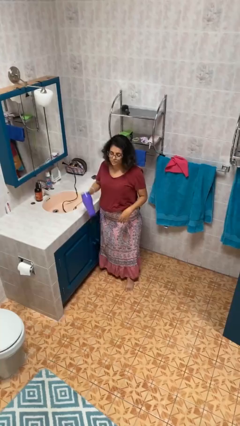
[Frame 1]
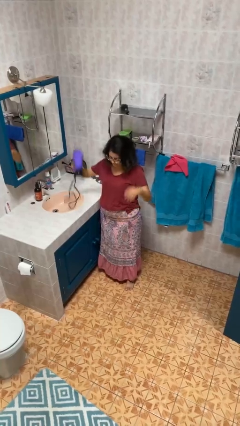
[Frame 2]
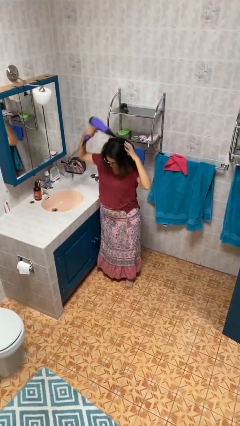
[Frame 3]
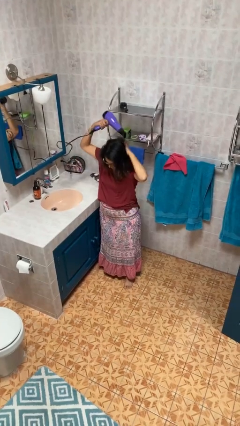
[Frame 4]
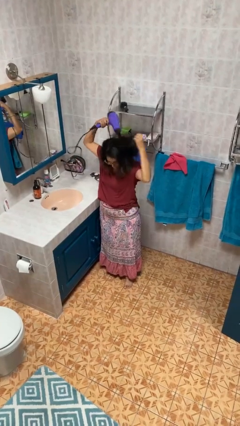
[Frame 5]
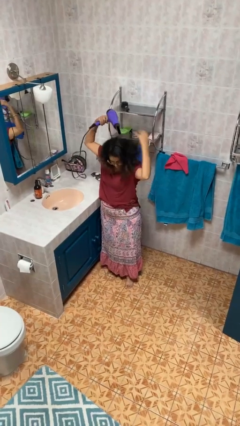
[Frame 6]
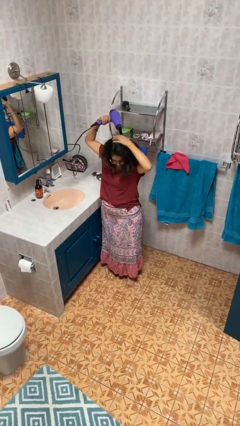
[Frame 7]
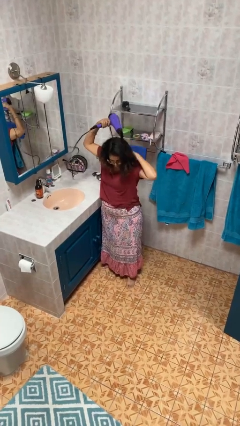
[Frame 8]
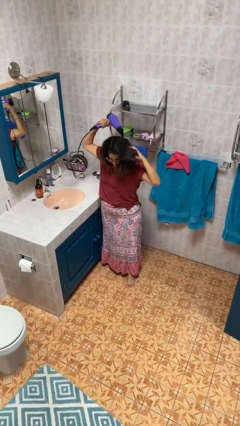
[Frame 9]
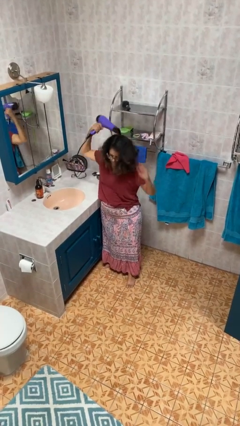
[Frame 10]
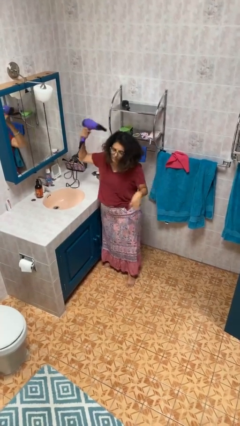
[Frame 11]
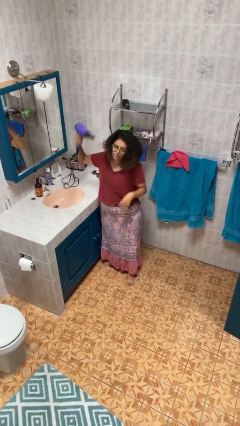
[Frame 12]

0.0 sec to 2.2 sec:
person dries hair with hairdryer

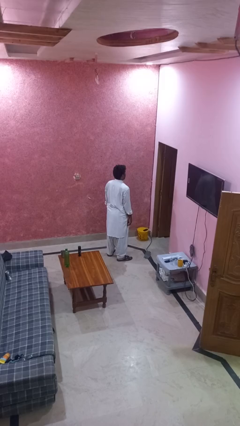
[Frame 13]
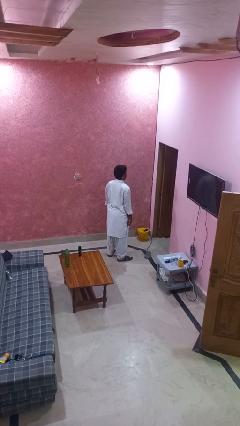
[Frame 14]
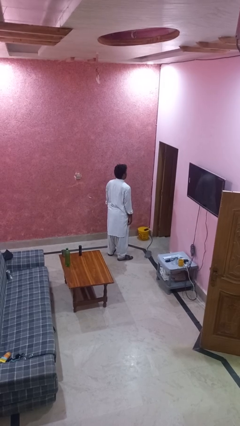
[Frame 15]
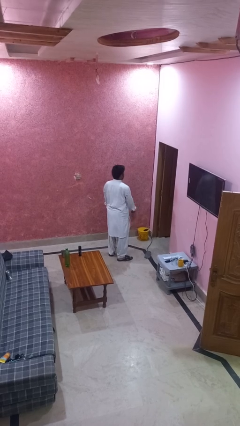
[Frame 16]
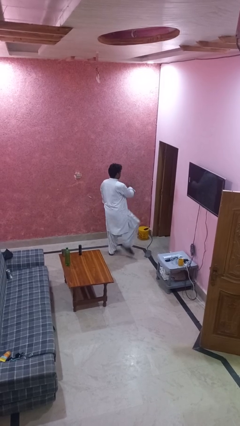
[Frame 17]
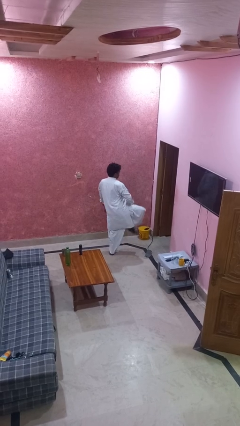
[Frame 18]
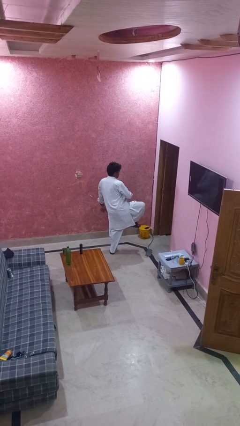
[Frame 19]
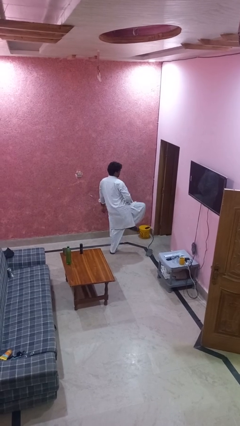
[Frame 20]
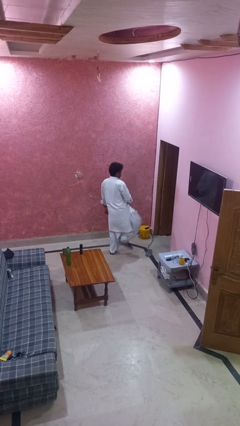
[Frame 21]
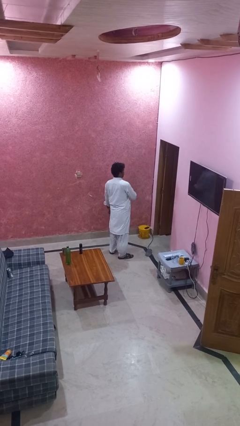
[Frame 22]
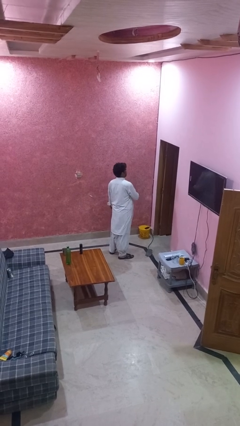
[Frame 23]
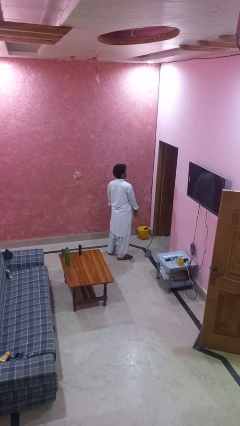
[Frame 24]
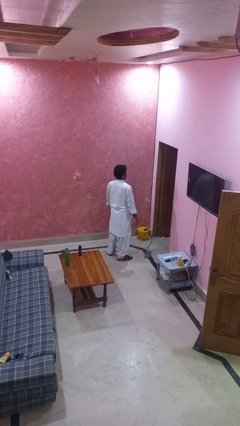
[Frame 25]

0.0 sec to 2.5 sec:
person slaps hands on thighs

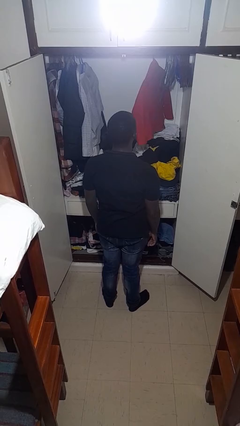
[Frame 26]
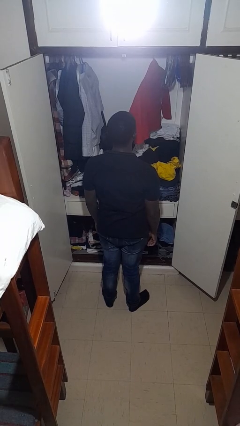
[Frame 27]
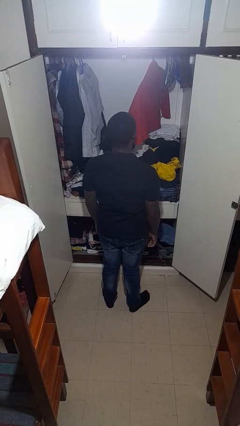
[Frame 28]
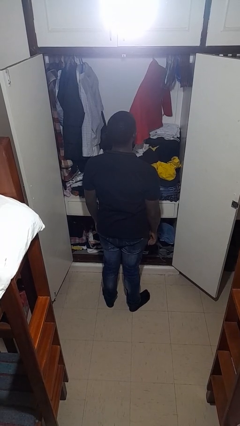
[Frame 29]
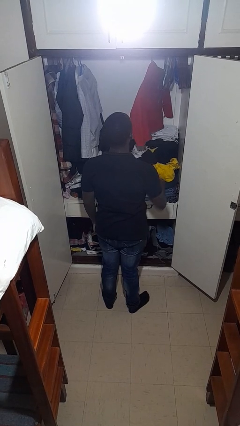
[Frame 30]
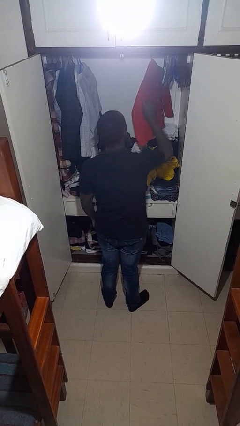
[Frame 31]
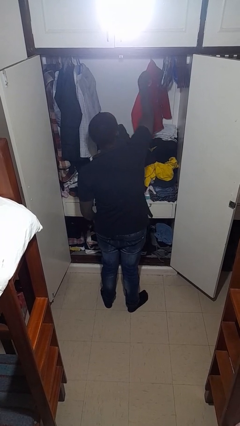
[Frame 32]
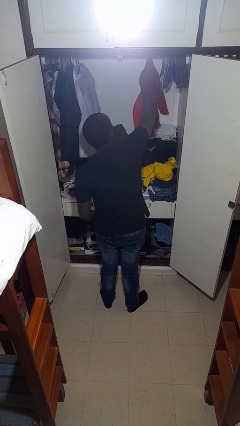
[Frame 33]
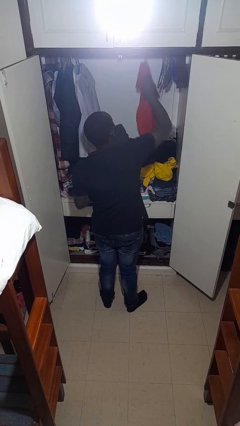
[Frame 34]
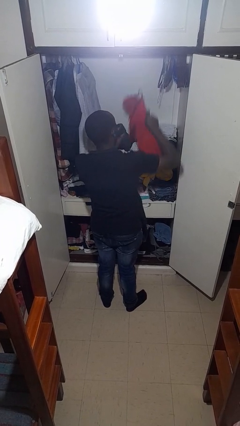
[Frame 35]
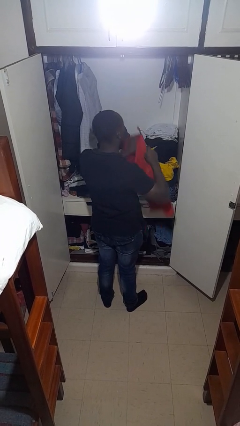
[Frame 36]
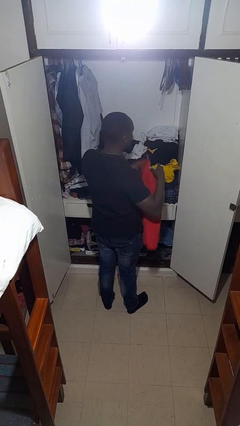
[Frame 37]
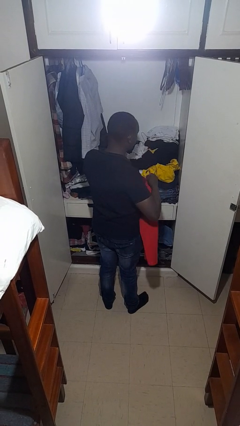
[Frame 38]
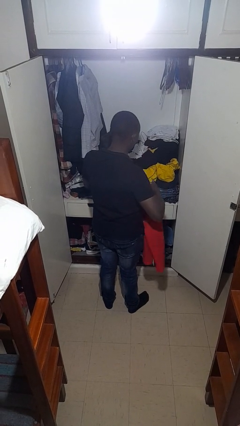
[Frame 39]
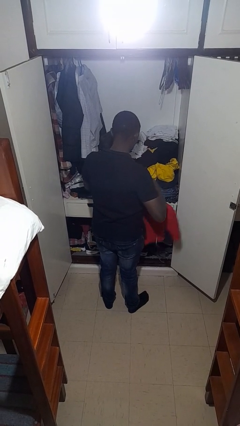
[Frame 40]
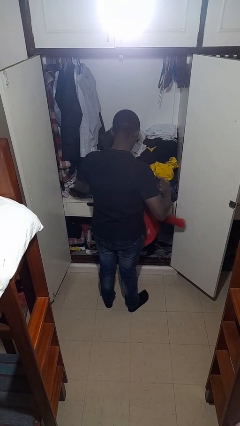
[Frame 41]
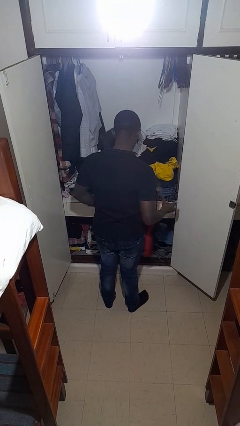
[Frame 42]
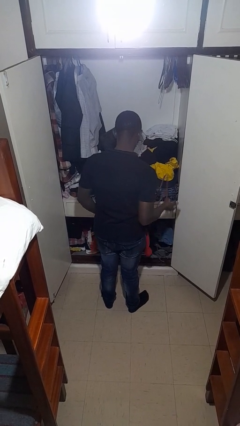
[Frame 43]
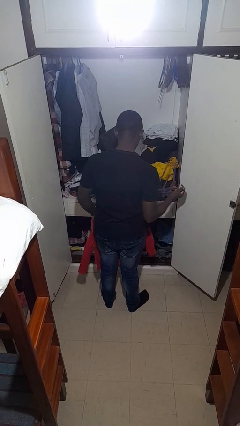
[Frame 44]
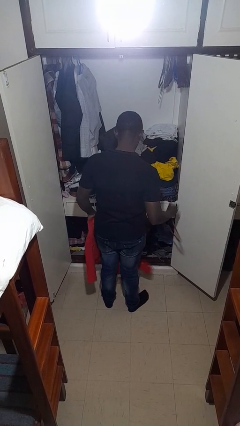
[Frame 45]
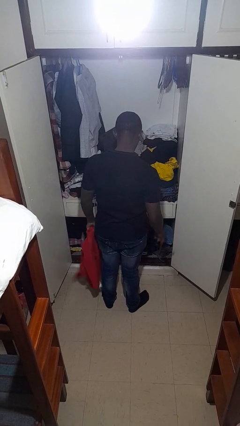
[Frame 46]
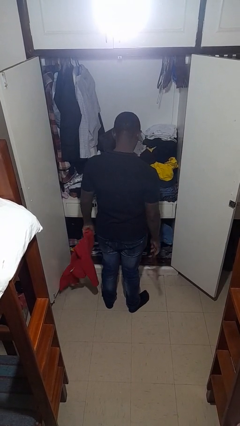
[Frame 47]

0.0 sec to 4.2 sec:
person takes clothes from closet

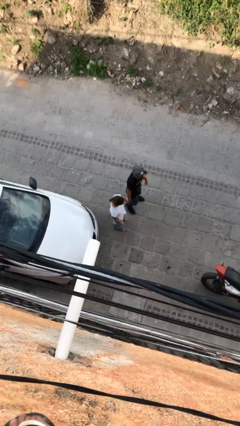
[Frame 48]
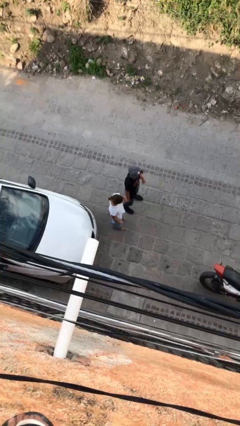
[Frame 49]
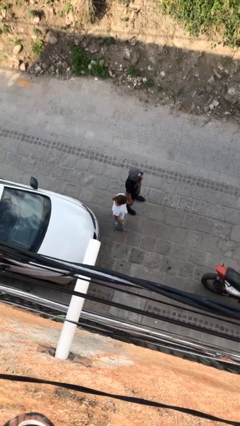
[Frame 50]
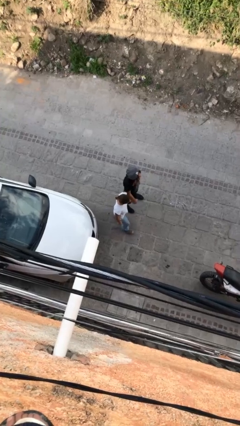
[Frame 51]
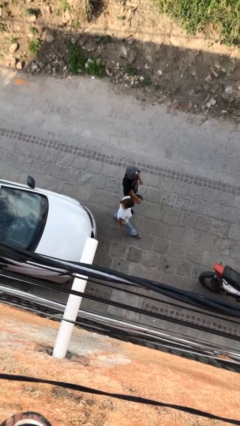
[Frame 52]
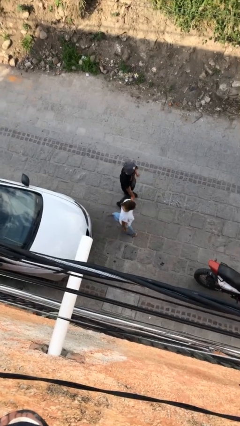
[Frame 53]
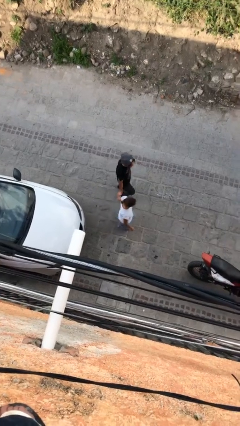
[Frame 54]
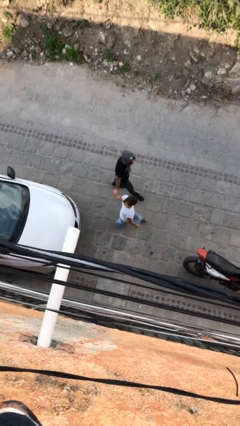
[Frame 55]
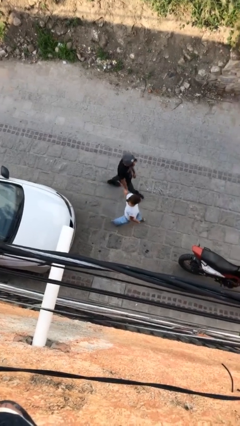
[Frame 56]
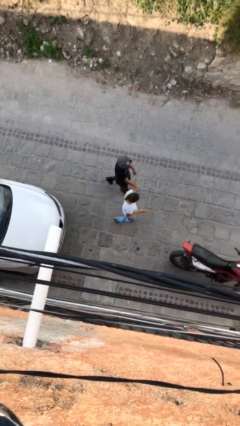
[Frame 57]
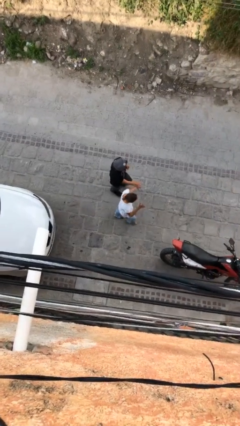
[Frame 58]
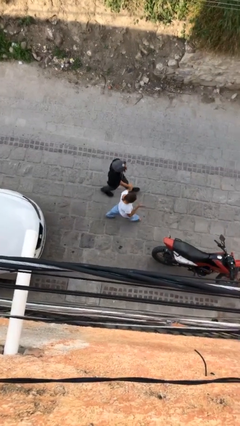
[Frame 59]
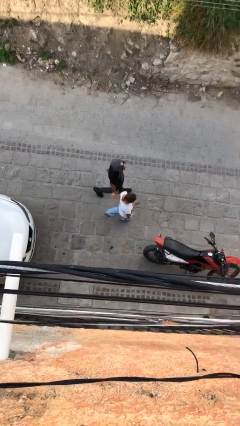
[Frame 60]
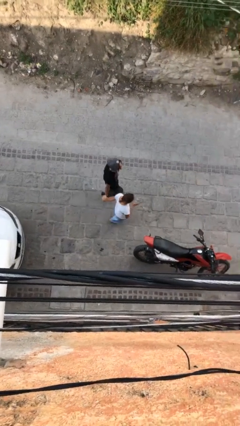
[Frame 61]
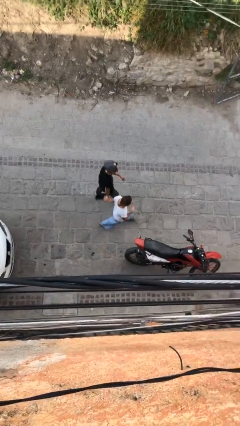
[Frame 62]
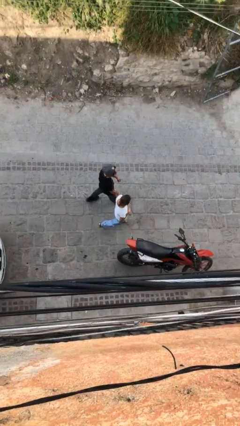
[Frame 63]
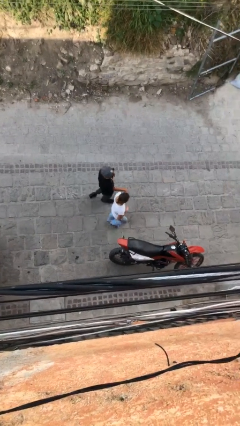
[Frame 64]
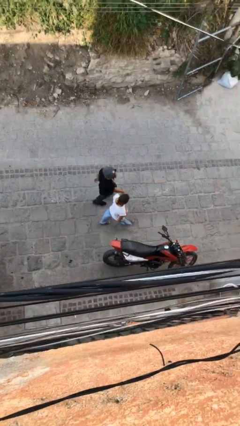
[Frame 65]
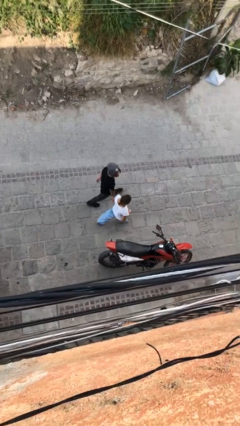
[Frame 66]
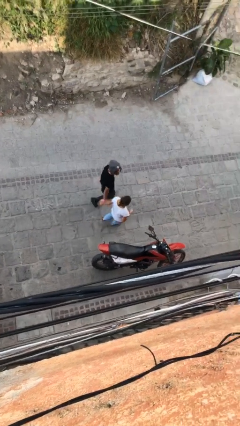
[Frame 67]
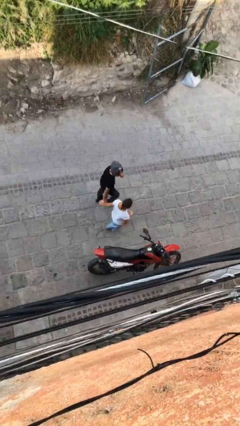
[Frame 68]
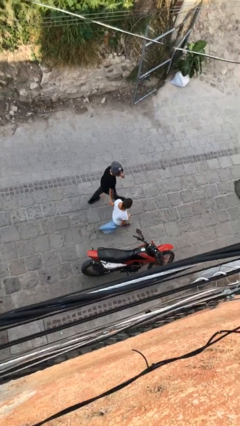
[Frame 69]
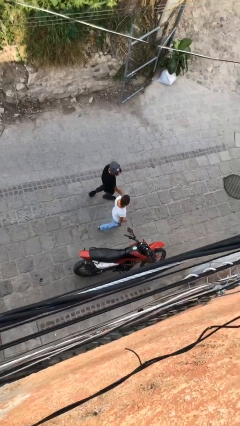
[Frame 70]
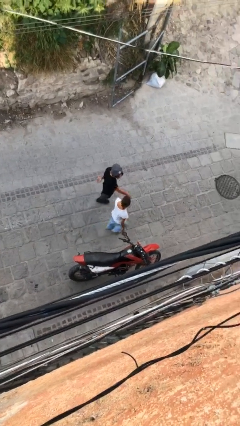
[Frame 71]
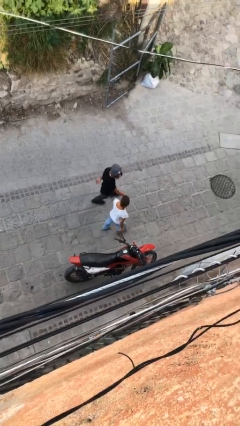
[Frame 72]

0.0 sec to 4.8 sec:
person holds hand

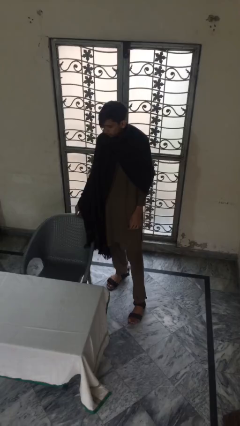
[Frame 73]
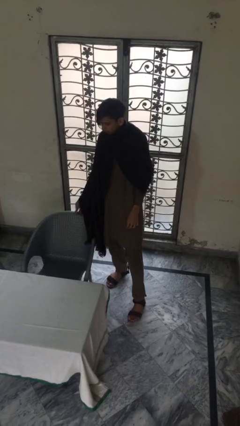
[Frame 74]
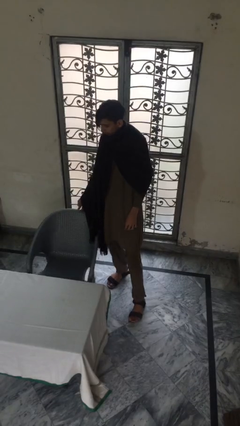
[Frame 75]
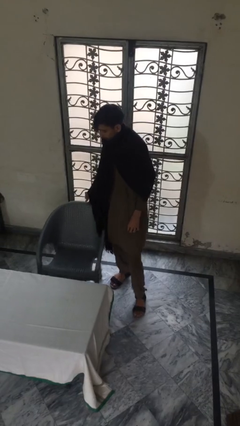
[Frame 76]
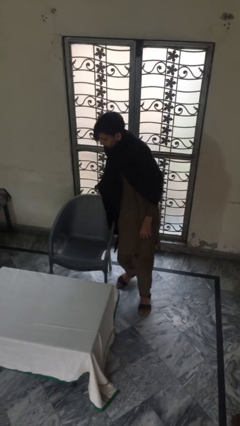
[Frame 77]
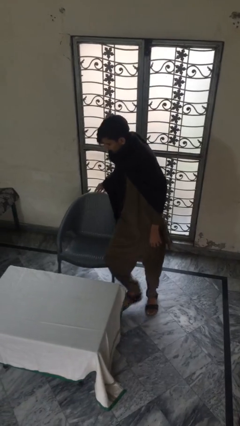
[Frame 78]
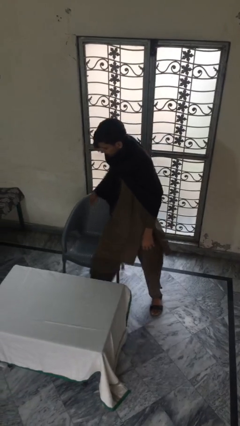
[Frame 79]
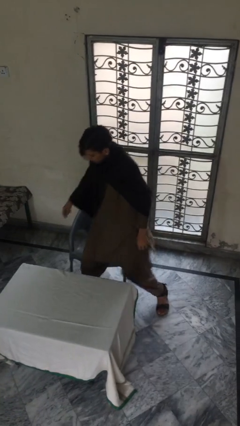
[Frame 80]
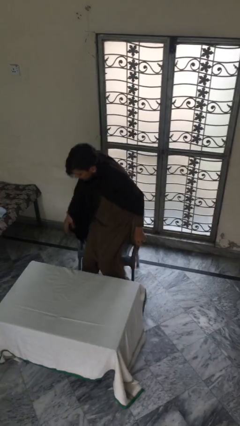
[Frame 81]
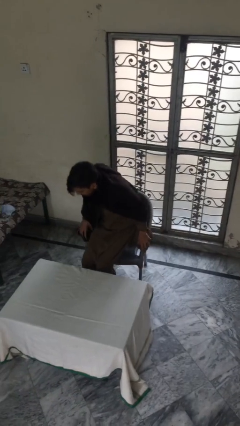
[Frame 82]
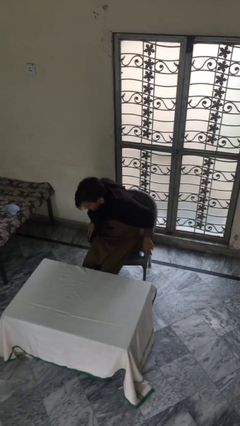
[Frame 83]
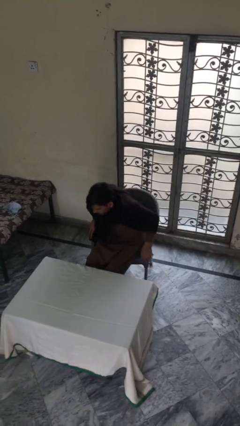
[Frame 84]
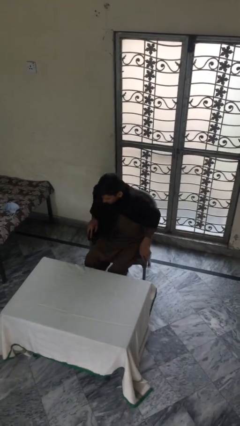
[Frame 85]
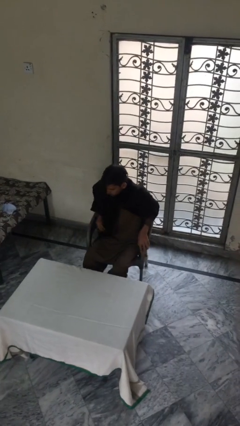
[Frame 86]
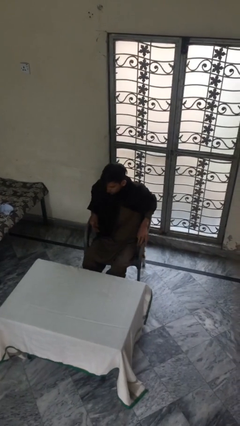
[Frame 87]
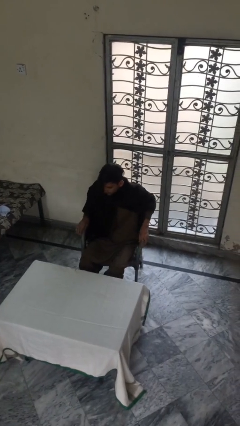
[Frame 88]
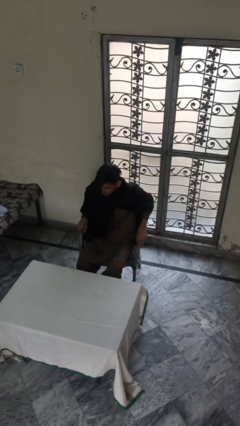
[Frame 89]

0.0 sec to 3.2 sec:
person sits down

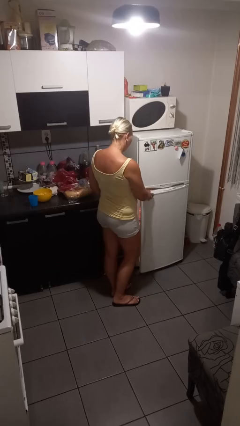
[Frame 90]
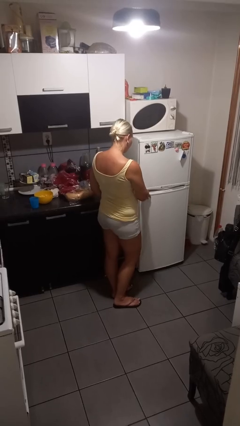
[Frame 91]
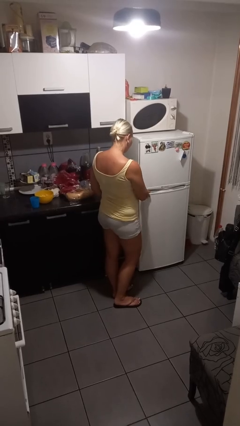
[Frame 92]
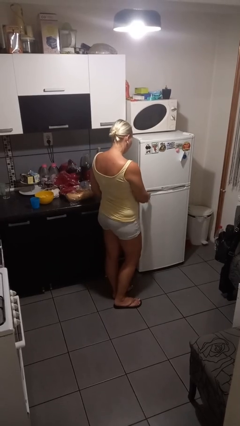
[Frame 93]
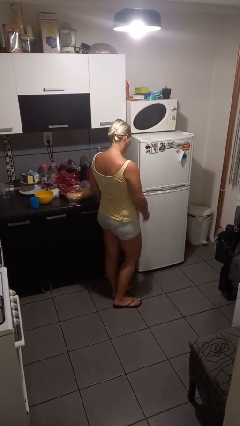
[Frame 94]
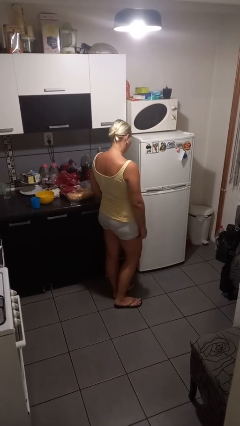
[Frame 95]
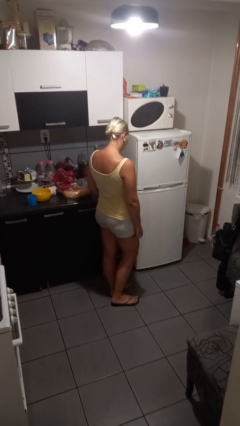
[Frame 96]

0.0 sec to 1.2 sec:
person closes refrigerator
